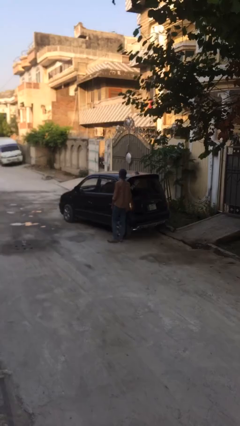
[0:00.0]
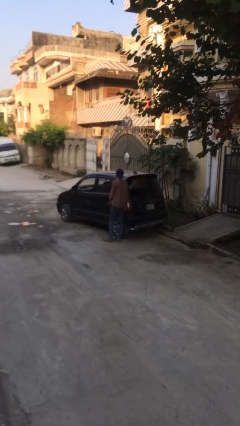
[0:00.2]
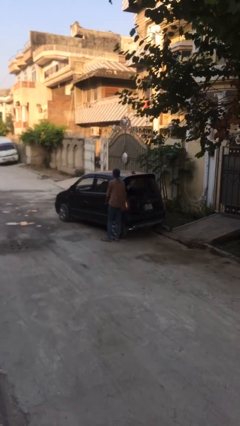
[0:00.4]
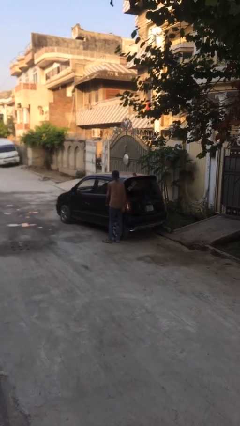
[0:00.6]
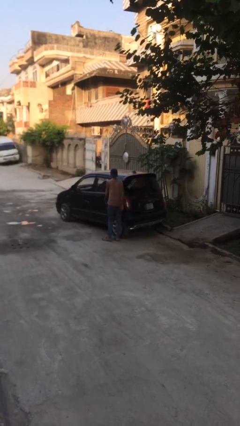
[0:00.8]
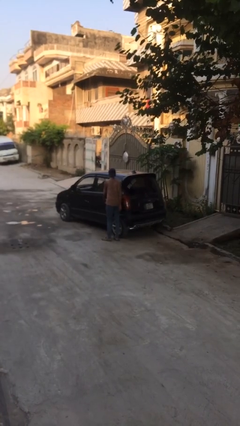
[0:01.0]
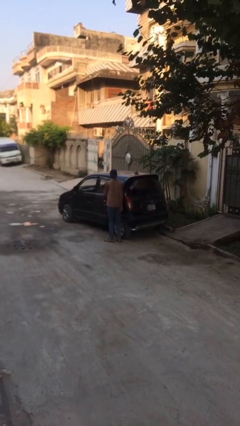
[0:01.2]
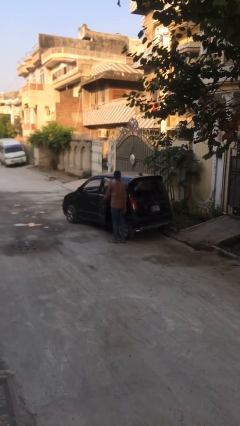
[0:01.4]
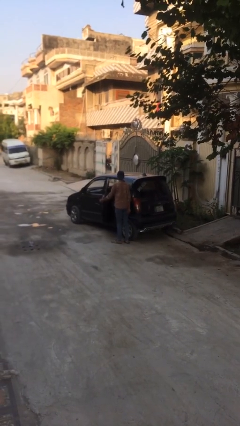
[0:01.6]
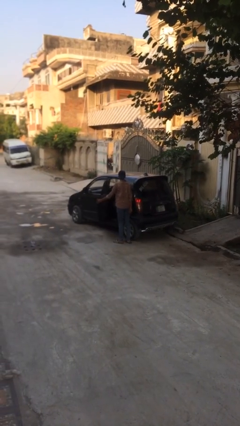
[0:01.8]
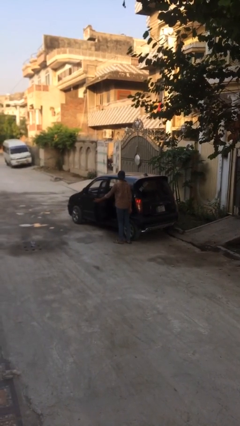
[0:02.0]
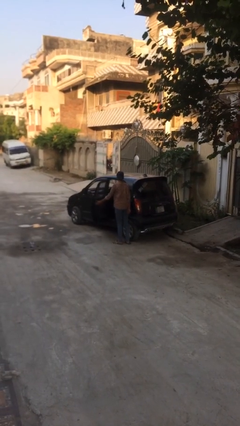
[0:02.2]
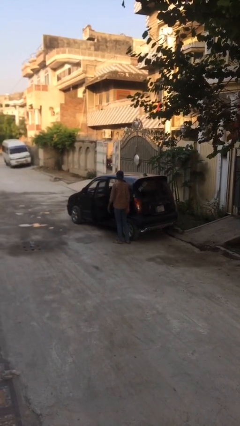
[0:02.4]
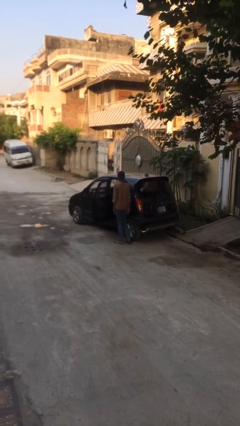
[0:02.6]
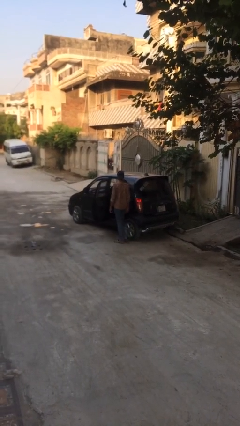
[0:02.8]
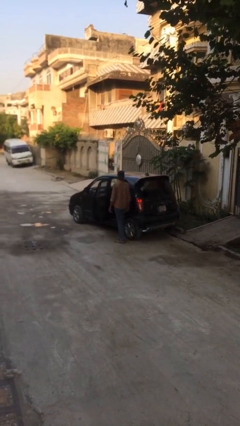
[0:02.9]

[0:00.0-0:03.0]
person opens car door

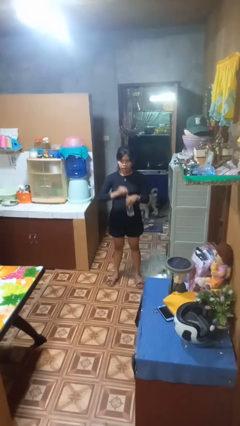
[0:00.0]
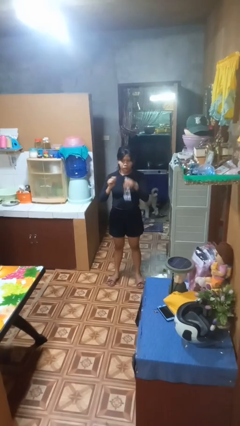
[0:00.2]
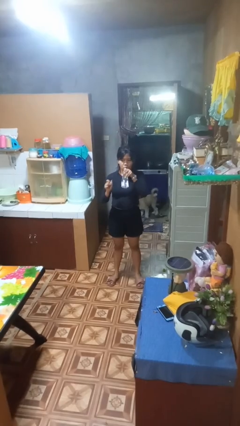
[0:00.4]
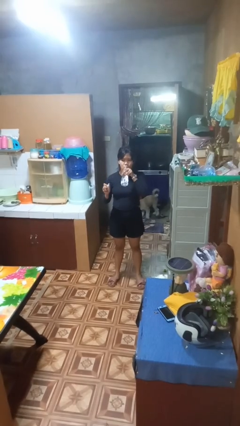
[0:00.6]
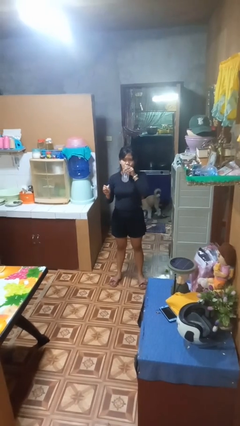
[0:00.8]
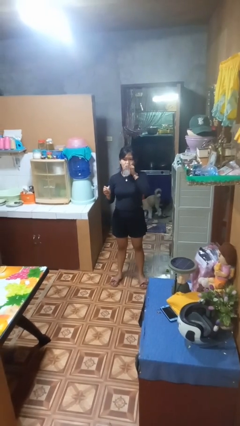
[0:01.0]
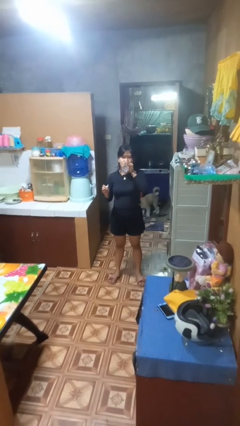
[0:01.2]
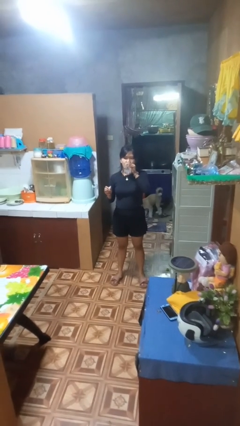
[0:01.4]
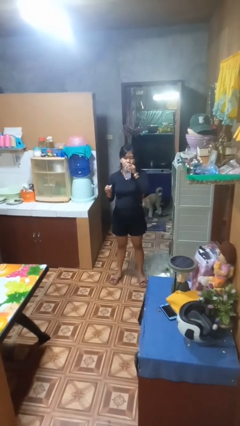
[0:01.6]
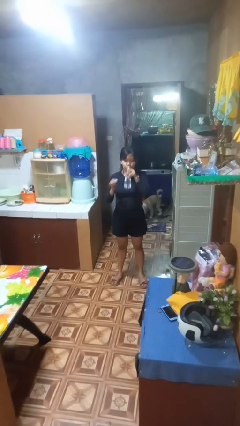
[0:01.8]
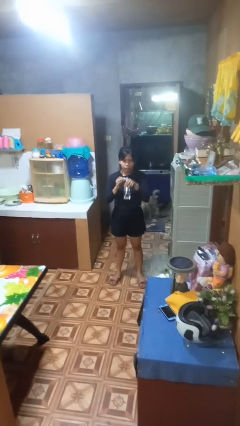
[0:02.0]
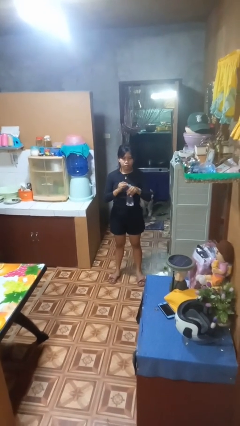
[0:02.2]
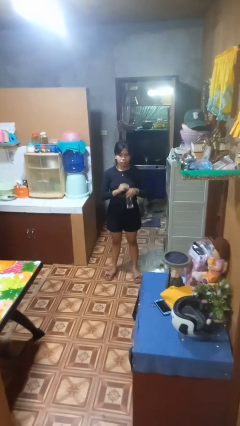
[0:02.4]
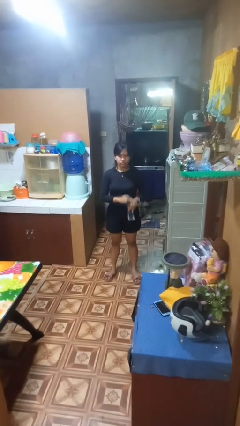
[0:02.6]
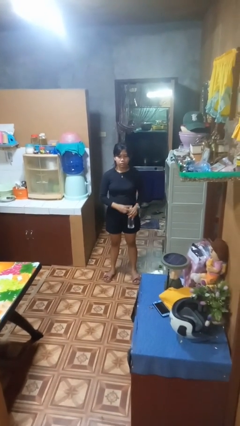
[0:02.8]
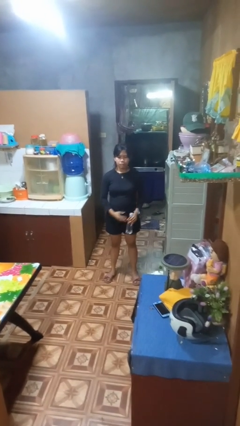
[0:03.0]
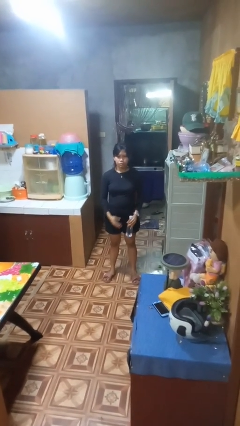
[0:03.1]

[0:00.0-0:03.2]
person drinks from bottle

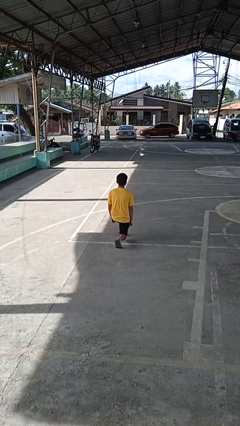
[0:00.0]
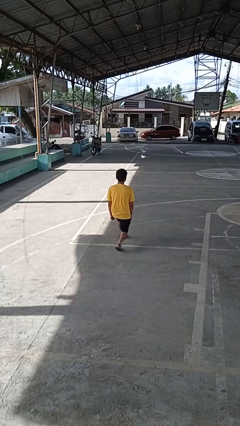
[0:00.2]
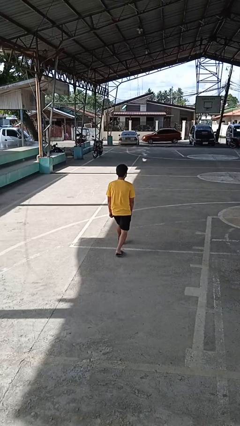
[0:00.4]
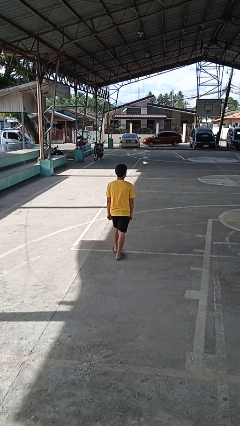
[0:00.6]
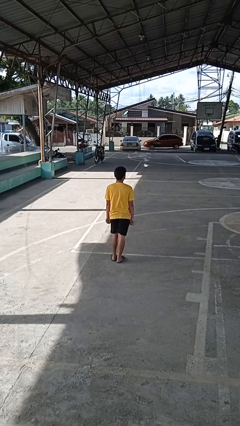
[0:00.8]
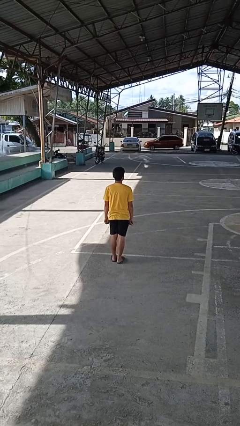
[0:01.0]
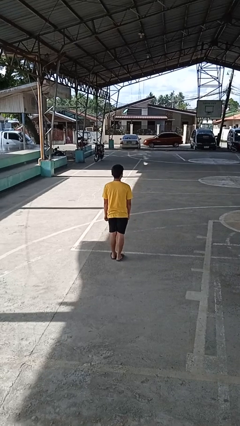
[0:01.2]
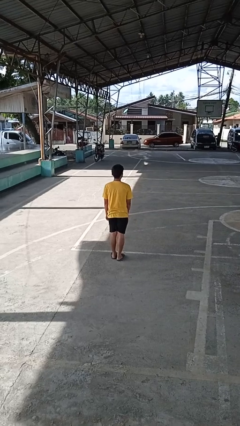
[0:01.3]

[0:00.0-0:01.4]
person stands up from floor

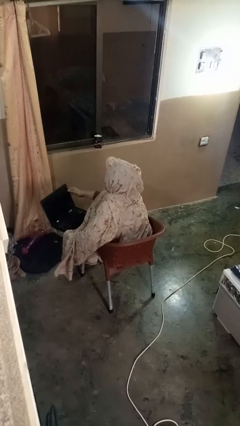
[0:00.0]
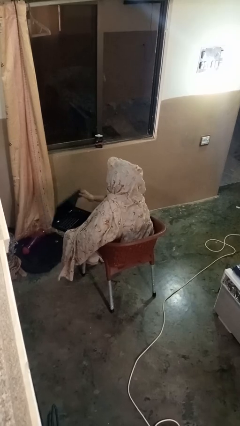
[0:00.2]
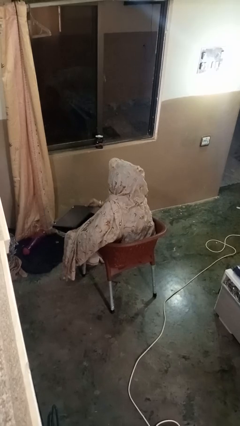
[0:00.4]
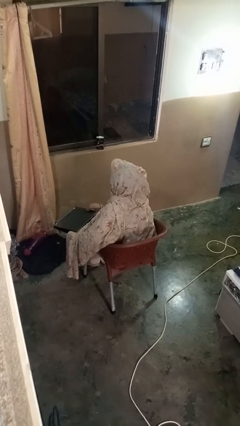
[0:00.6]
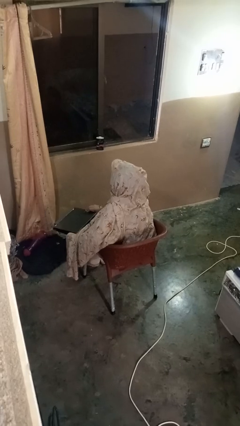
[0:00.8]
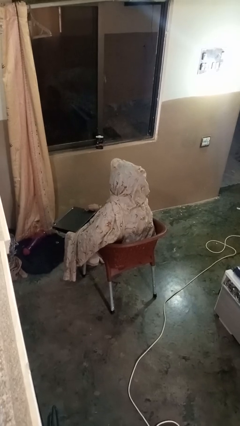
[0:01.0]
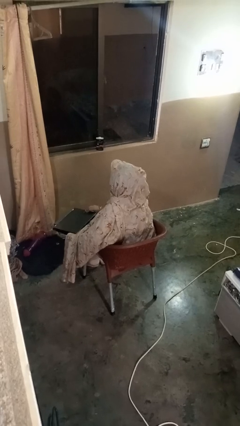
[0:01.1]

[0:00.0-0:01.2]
person closes laptop

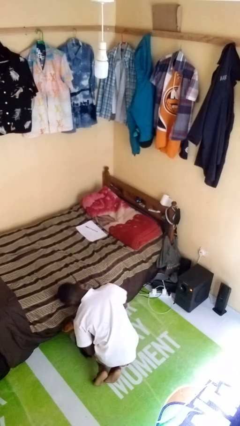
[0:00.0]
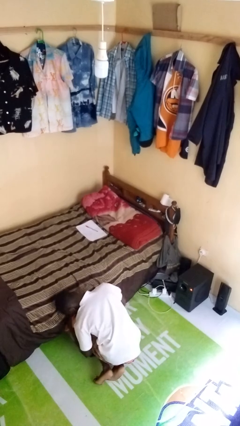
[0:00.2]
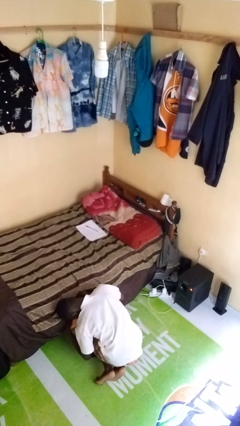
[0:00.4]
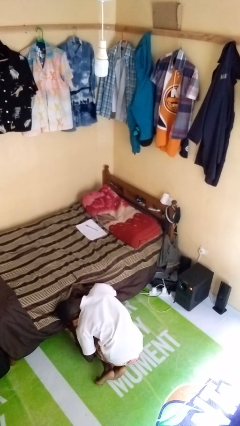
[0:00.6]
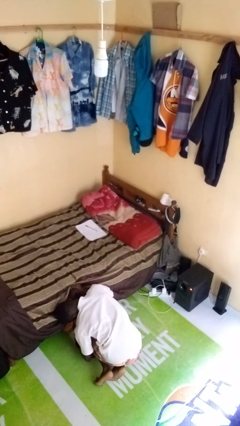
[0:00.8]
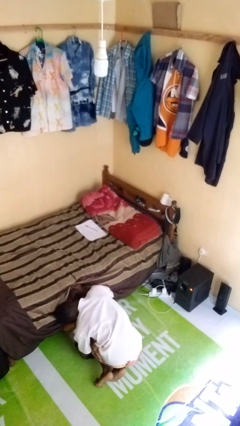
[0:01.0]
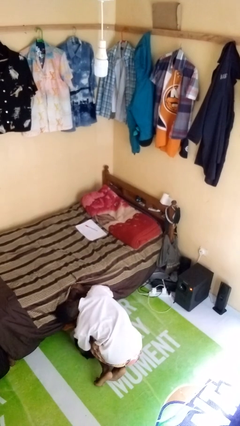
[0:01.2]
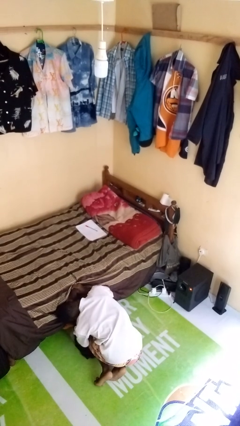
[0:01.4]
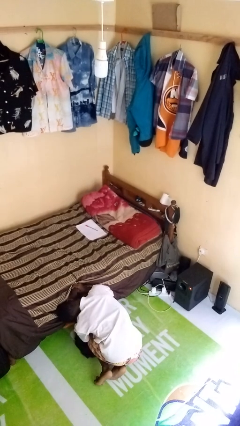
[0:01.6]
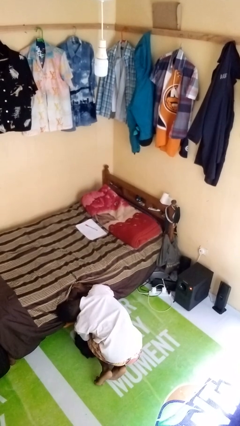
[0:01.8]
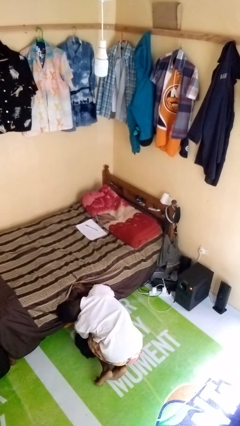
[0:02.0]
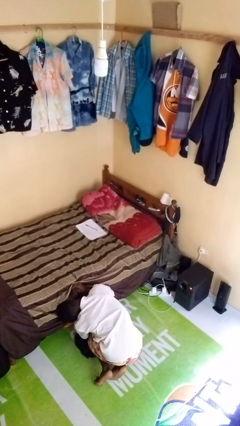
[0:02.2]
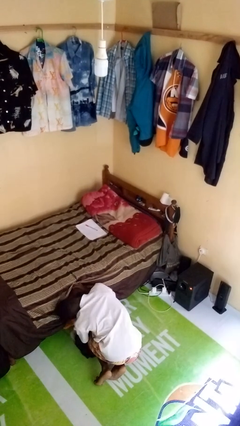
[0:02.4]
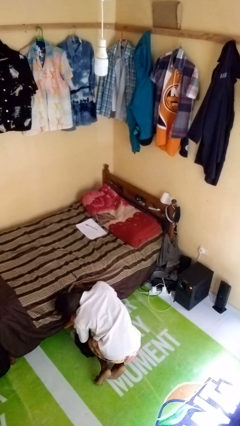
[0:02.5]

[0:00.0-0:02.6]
person searches under bed

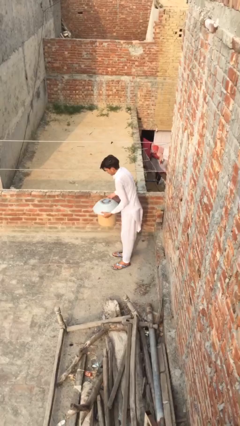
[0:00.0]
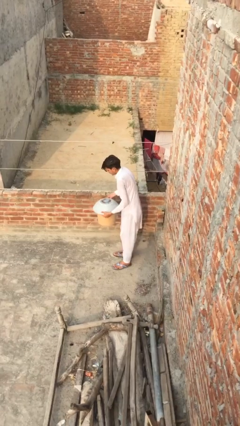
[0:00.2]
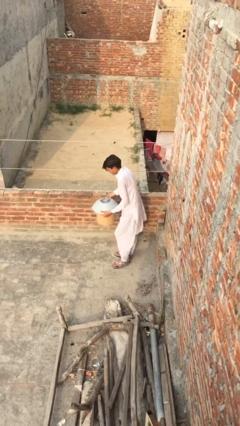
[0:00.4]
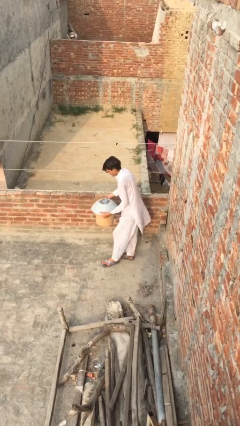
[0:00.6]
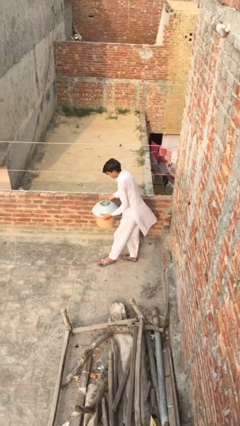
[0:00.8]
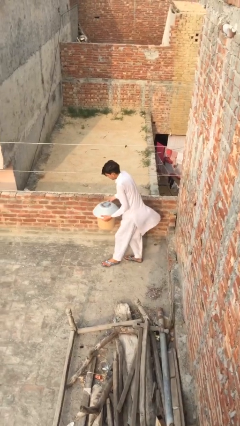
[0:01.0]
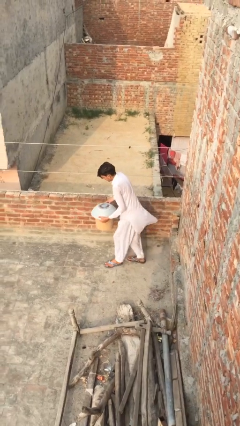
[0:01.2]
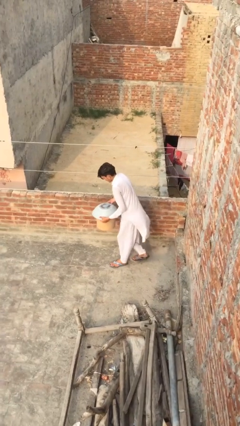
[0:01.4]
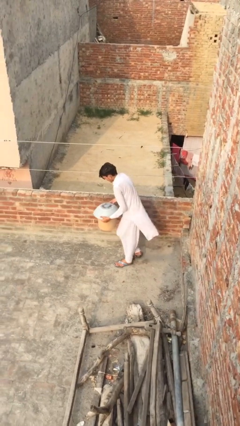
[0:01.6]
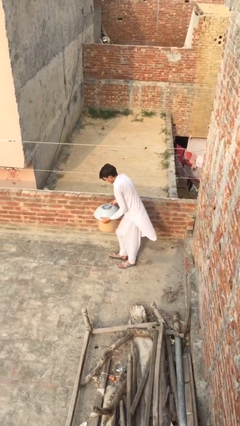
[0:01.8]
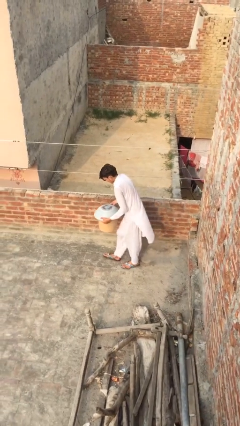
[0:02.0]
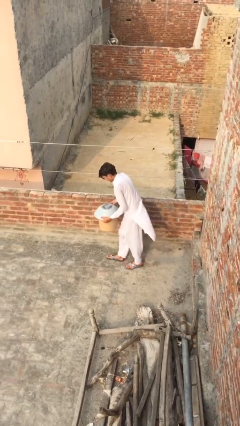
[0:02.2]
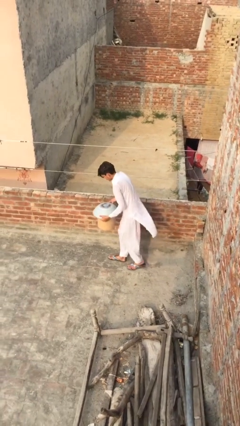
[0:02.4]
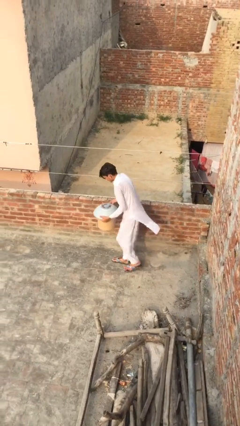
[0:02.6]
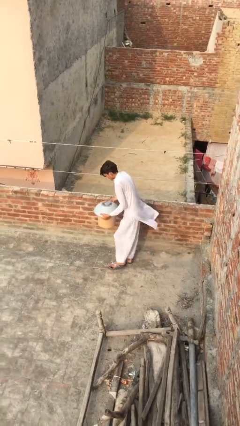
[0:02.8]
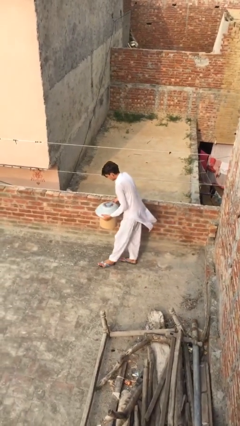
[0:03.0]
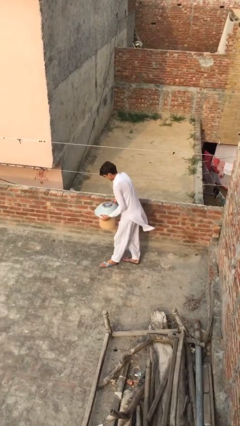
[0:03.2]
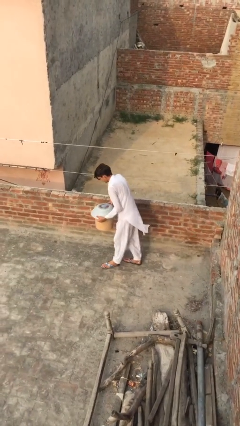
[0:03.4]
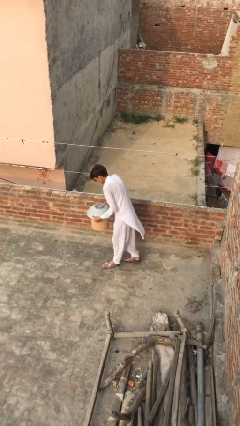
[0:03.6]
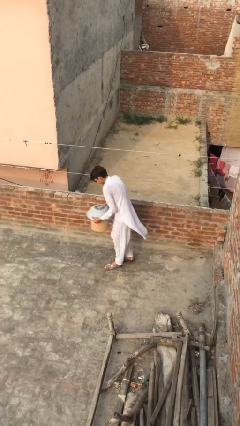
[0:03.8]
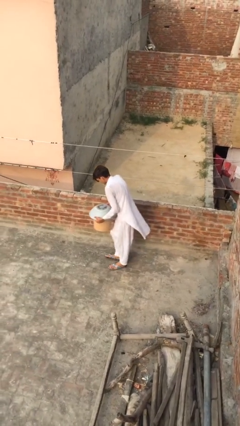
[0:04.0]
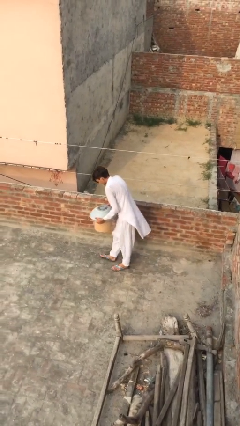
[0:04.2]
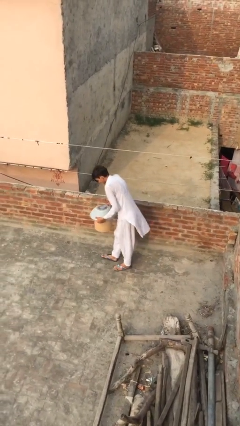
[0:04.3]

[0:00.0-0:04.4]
person carries heavy object

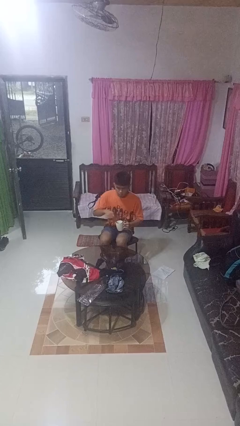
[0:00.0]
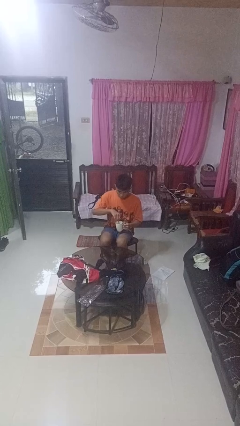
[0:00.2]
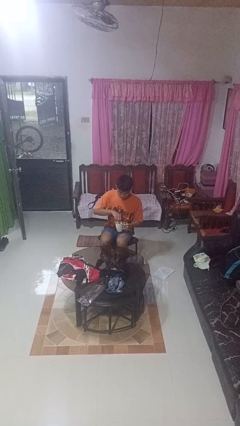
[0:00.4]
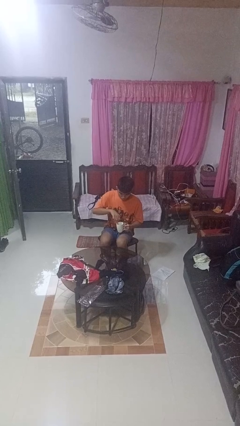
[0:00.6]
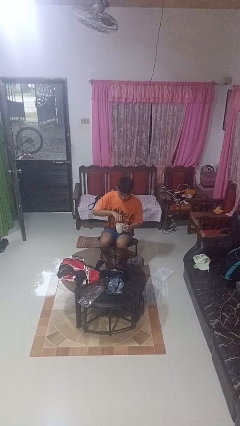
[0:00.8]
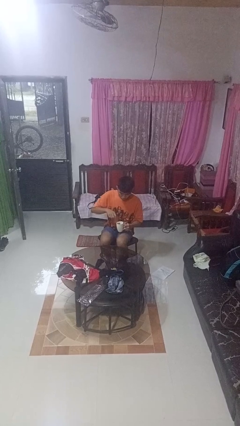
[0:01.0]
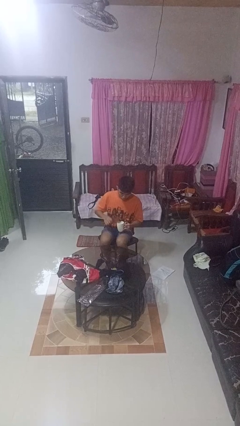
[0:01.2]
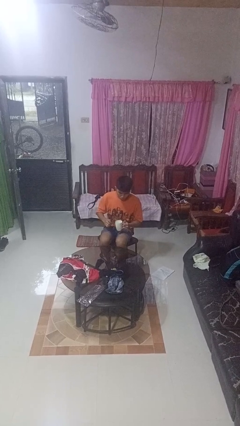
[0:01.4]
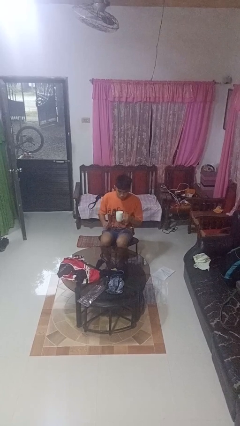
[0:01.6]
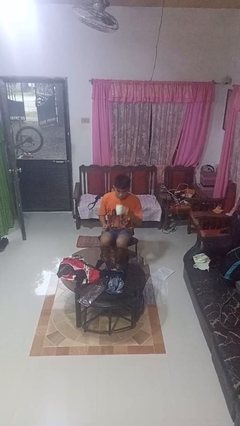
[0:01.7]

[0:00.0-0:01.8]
person stirs mug
